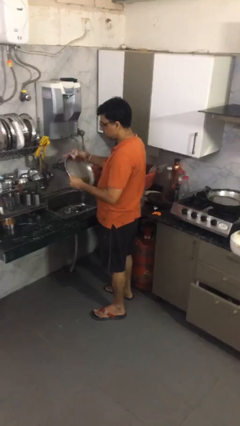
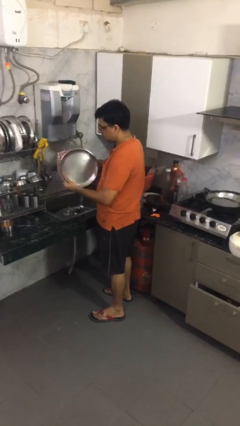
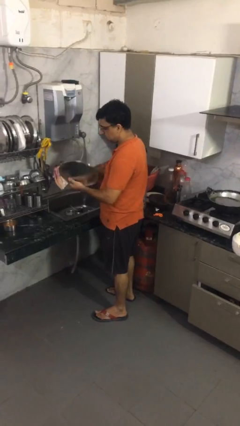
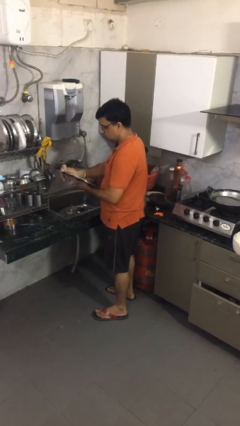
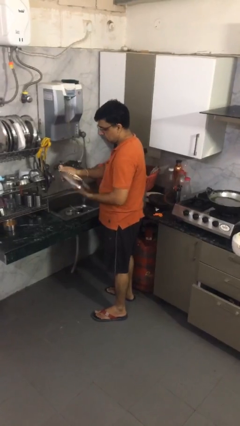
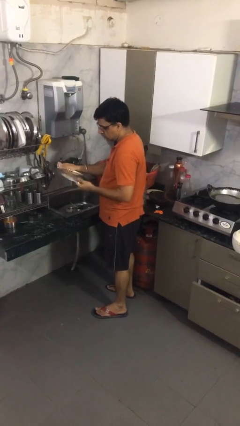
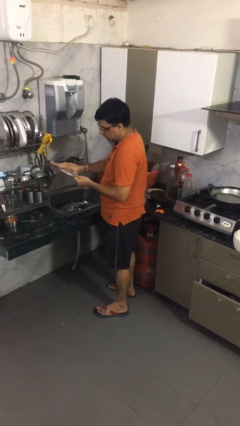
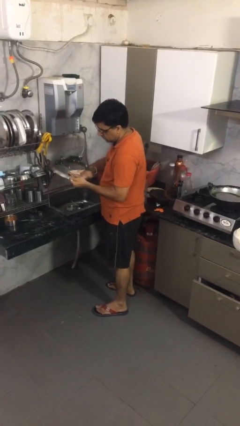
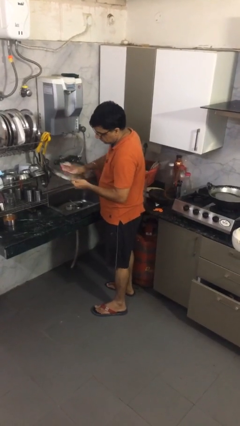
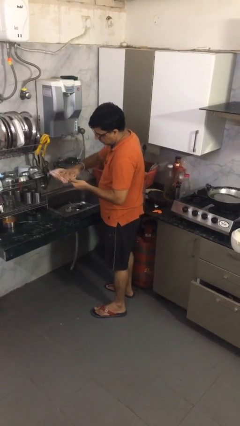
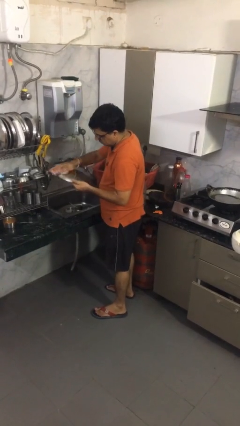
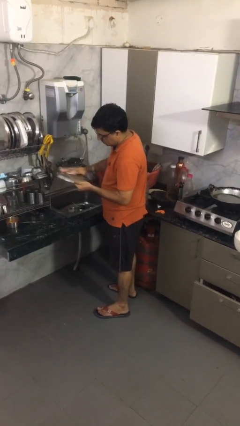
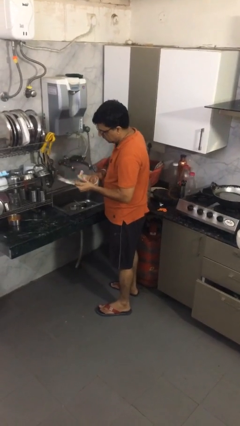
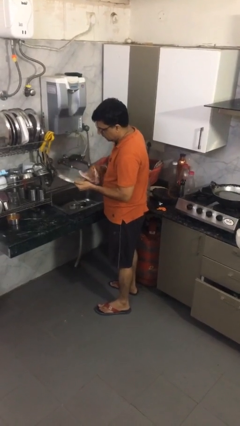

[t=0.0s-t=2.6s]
person dries dish

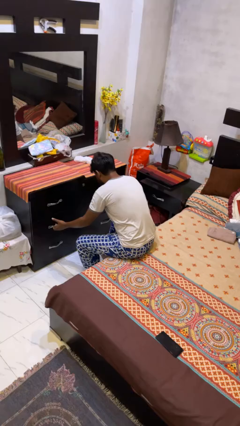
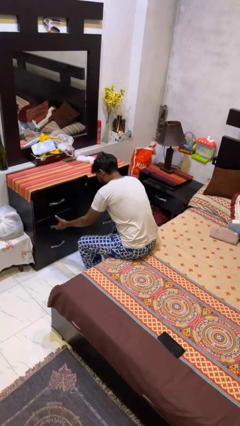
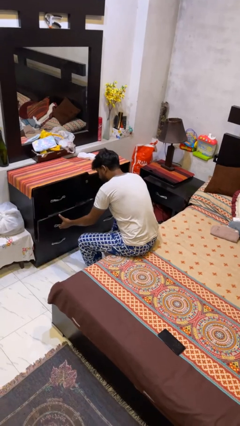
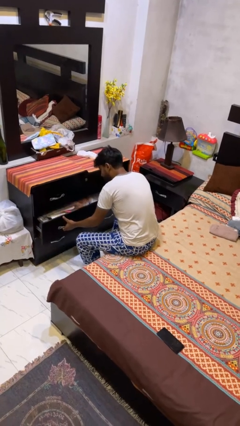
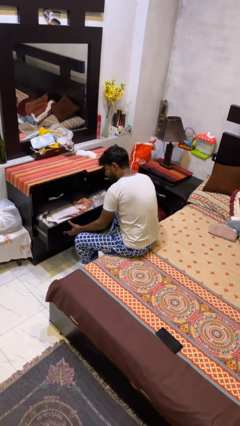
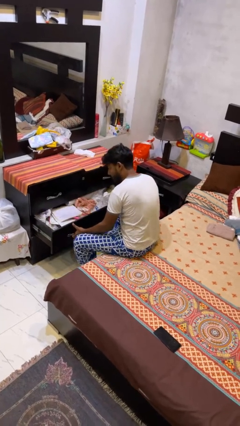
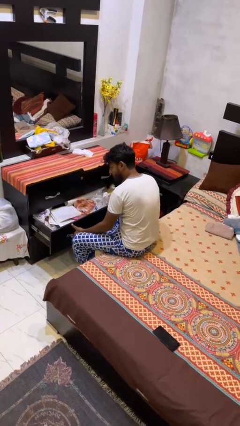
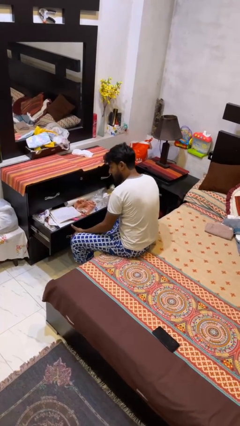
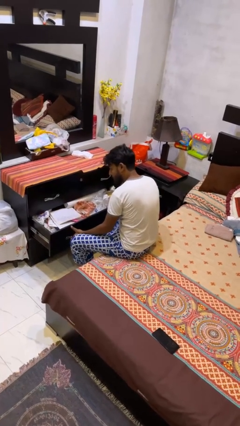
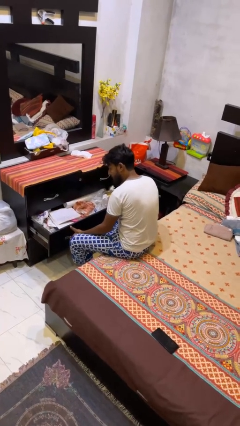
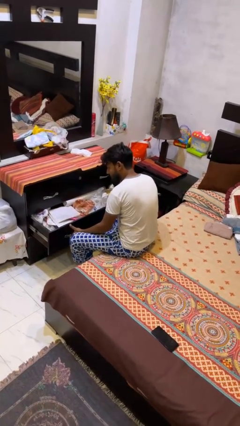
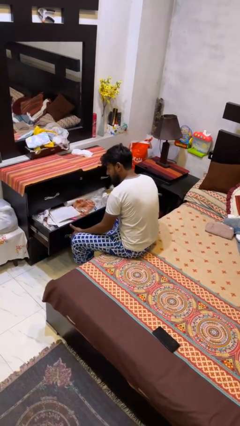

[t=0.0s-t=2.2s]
person opens dresser drawer

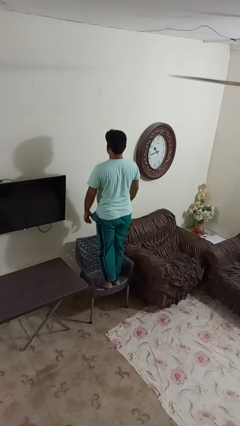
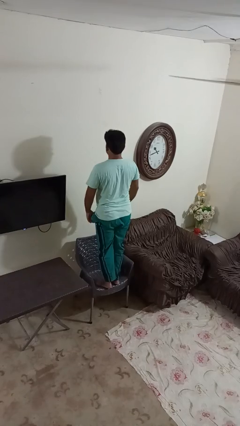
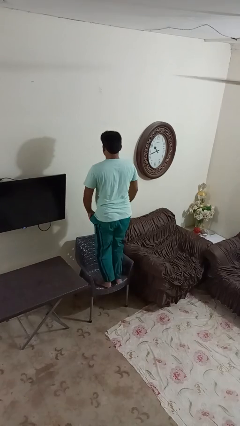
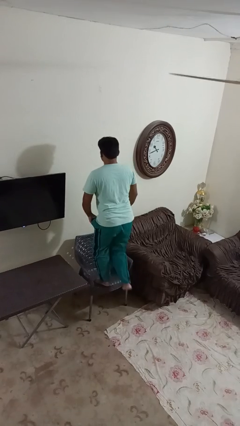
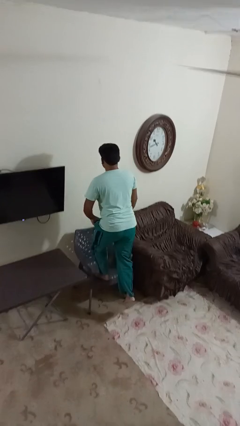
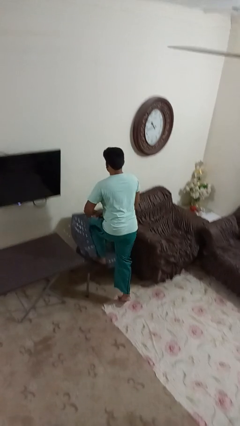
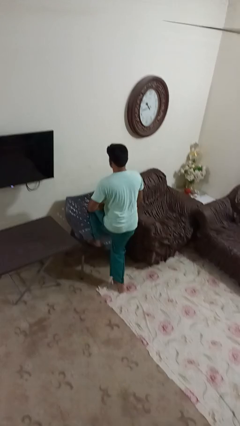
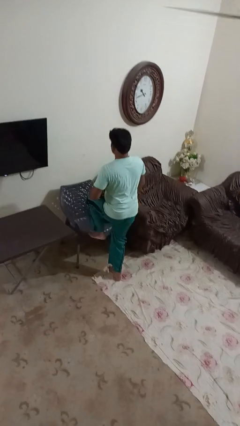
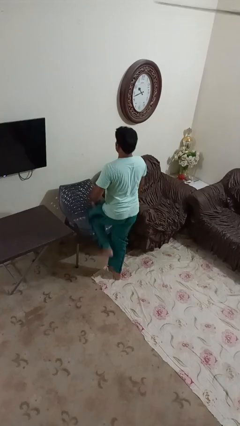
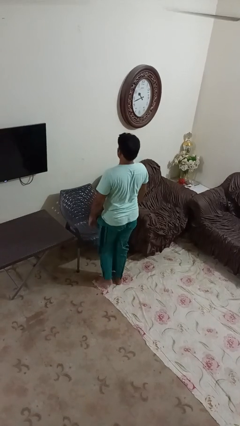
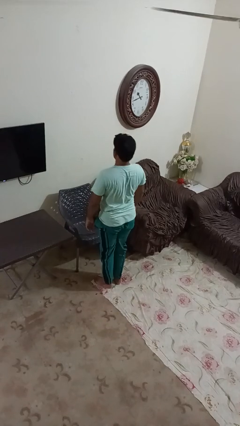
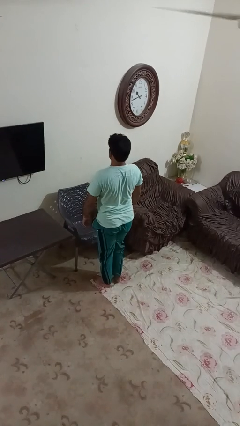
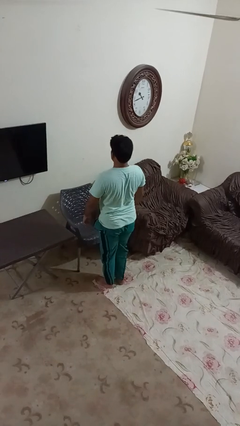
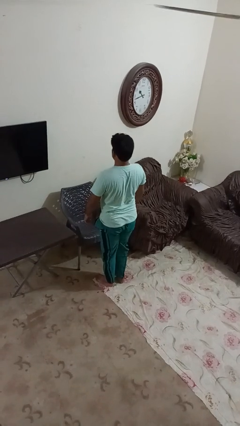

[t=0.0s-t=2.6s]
person climbs off chair

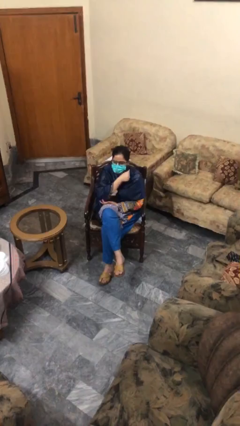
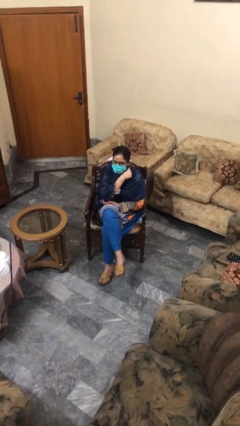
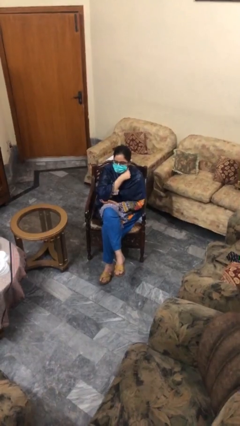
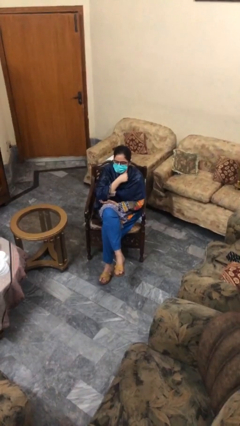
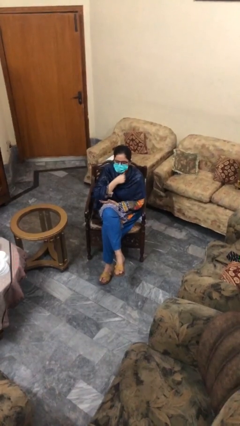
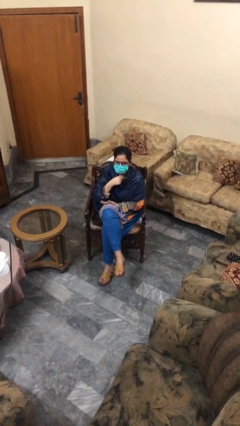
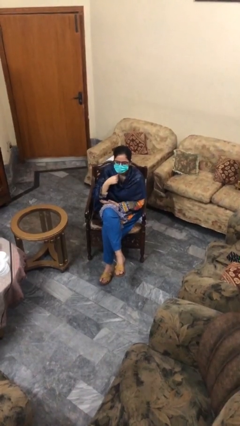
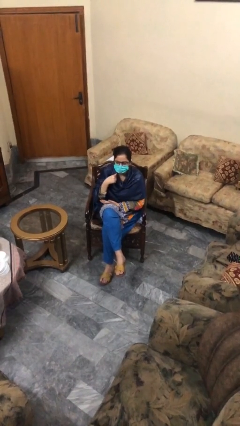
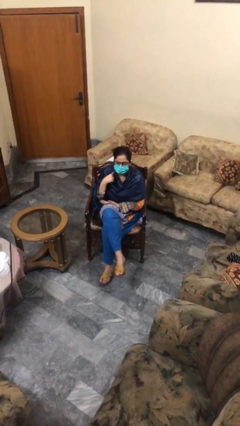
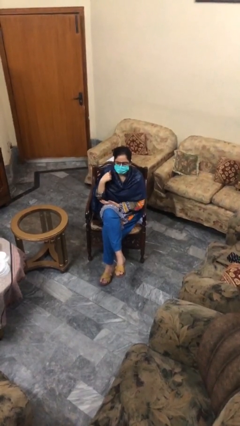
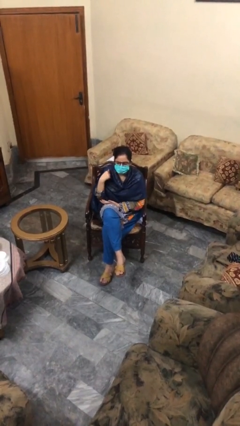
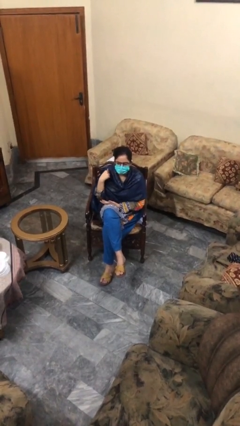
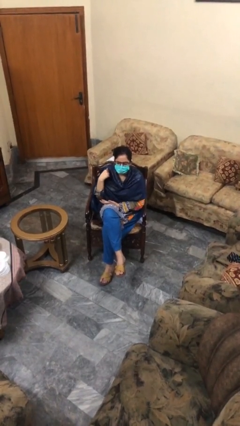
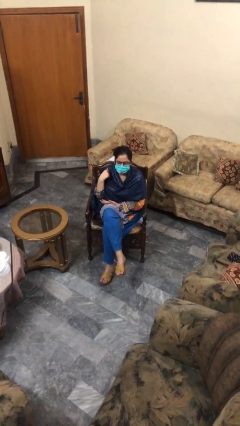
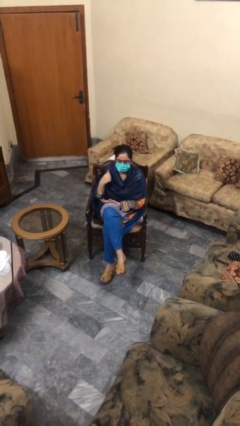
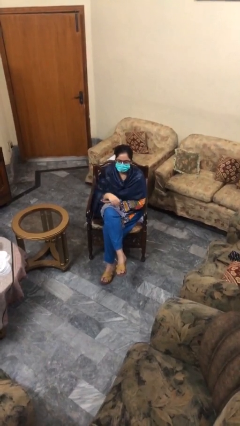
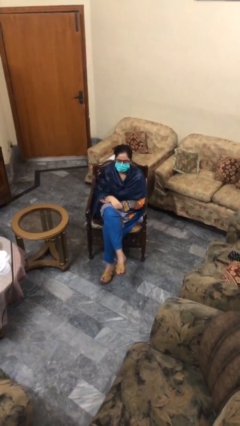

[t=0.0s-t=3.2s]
person gestures cut

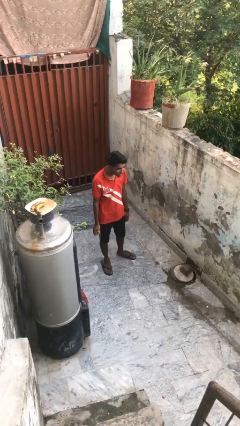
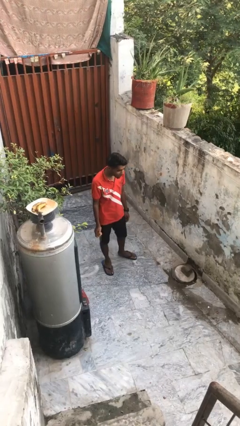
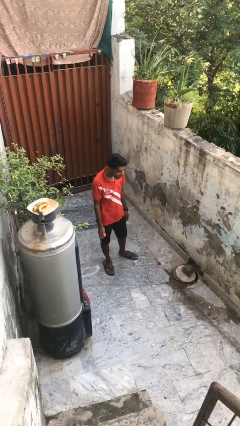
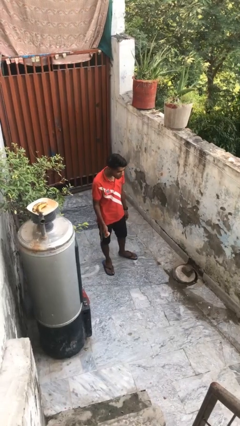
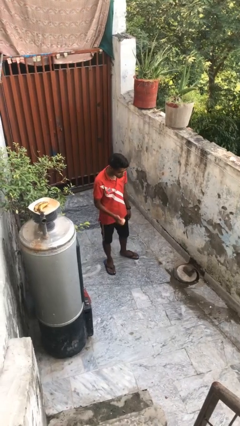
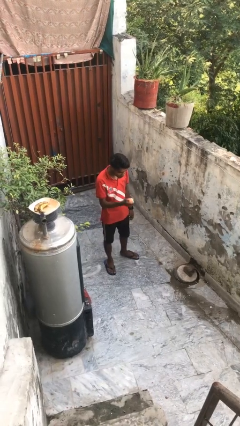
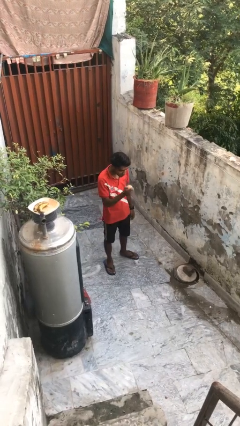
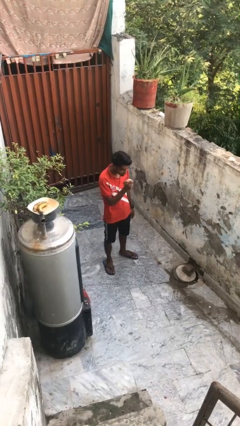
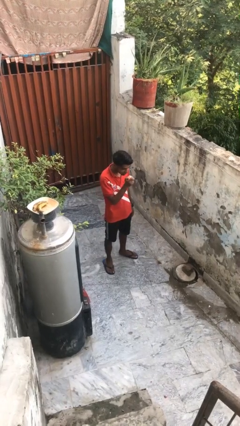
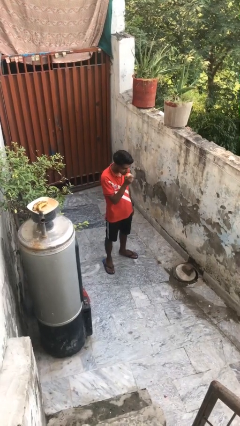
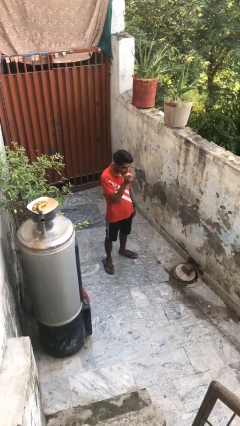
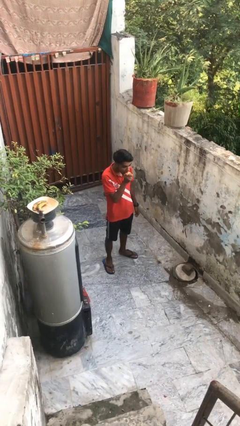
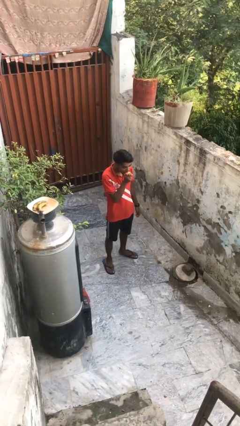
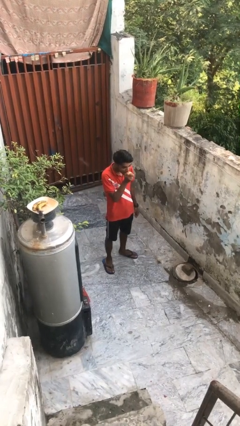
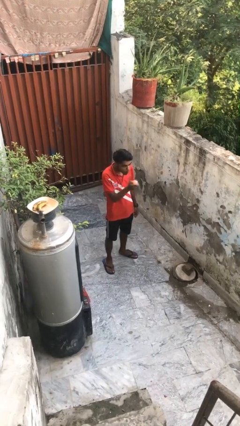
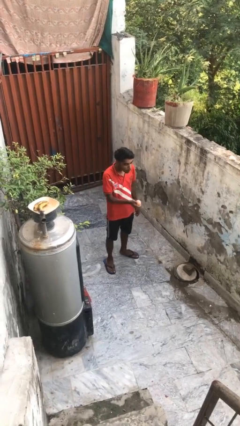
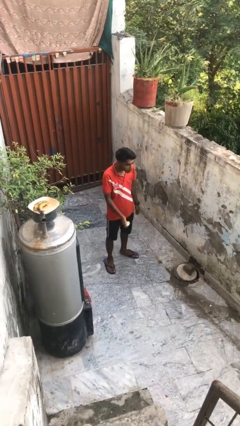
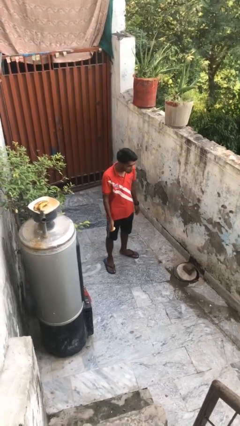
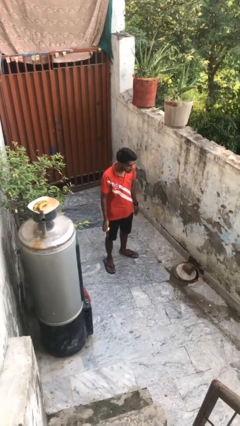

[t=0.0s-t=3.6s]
person eats apple

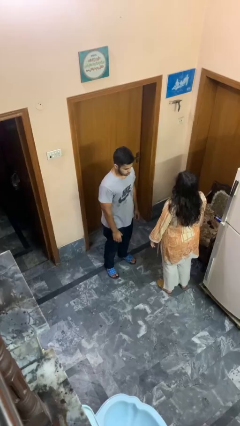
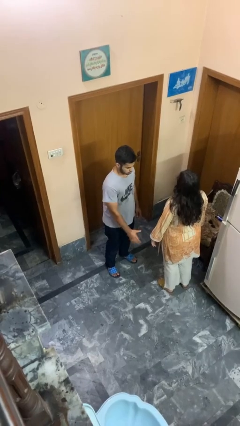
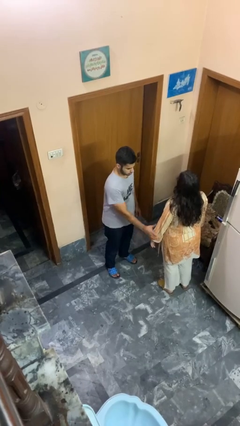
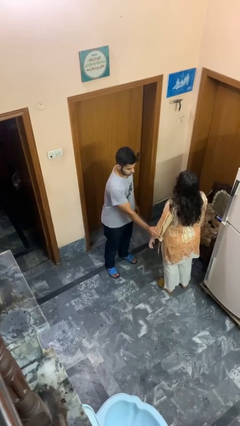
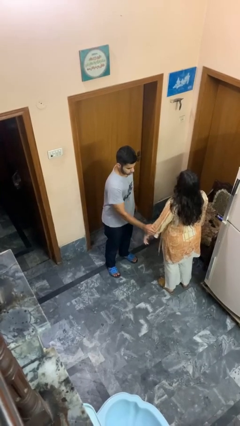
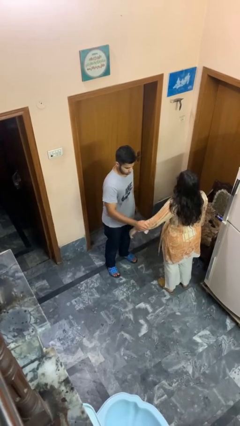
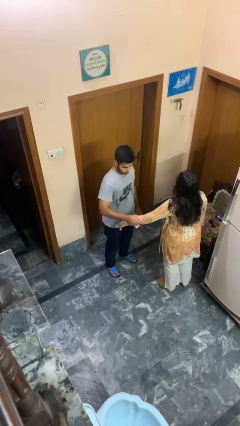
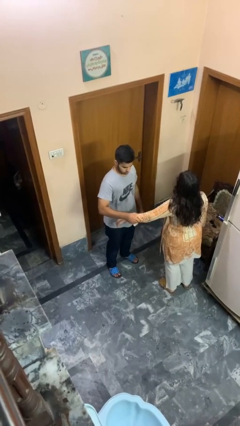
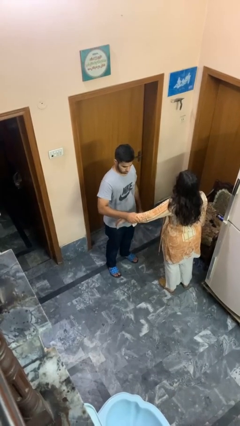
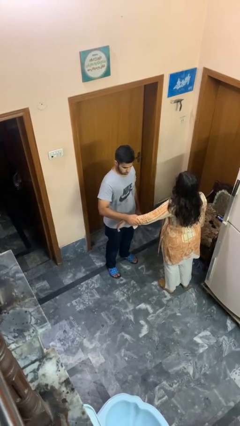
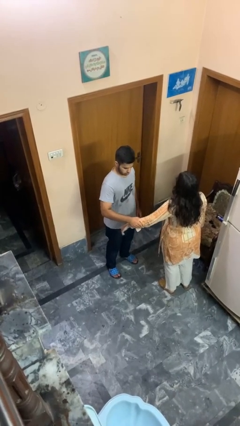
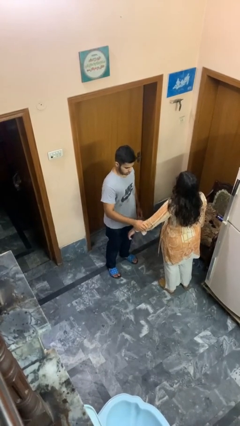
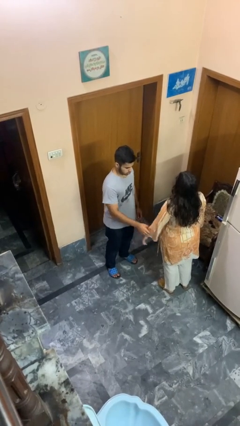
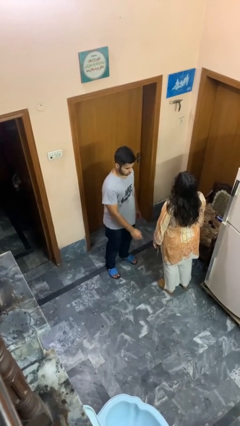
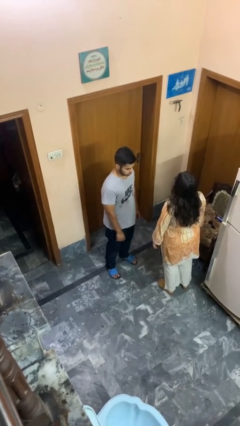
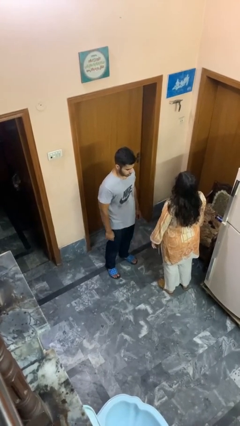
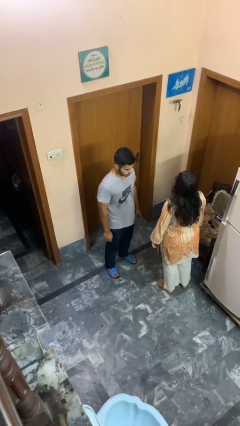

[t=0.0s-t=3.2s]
person grabs person by forearm
